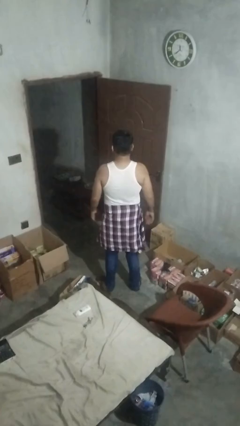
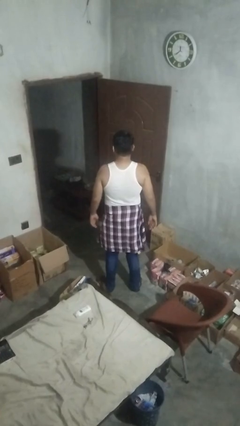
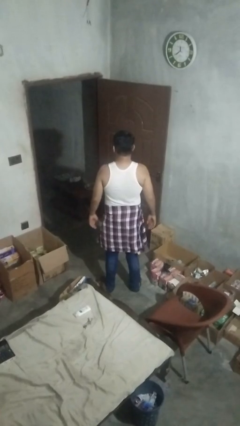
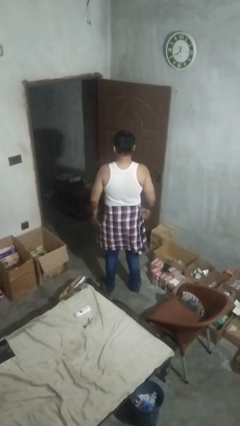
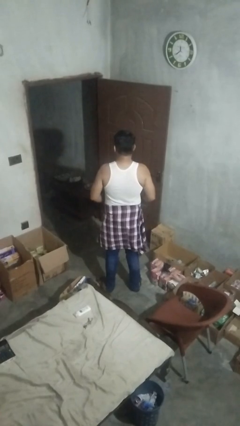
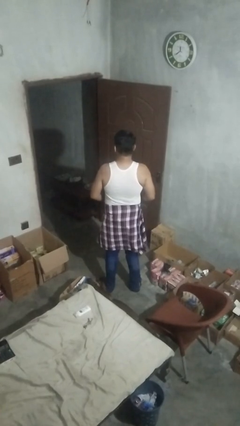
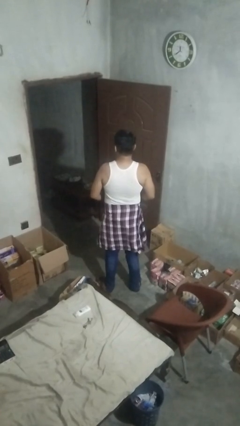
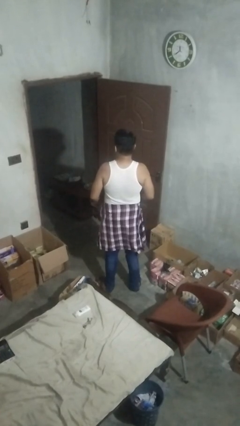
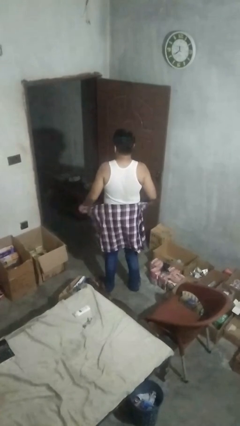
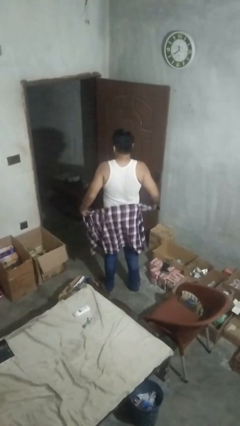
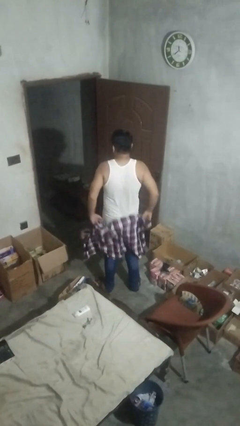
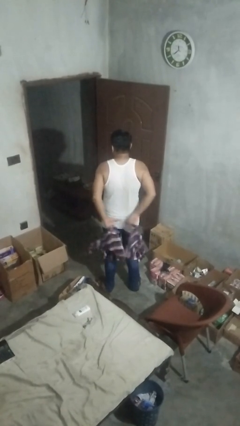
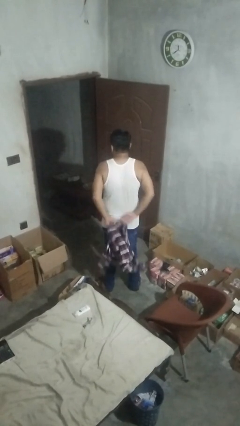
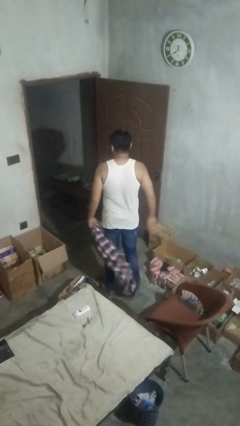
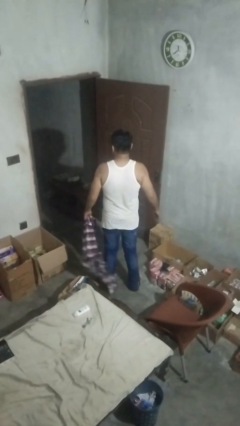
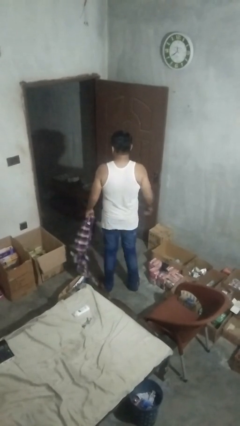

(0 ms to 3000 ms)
person unties jacket around waist

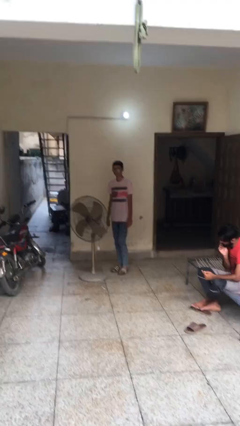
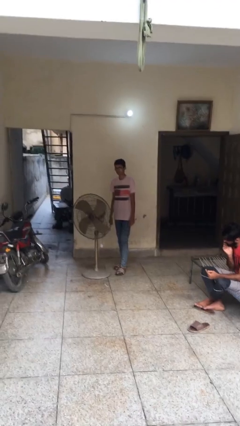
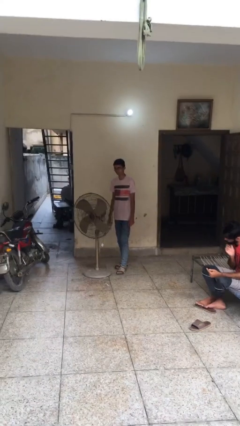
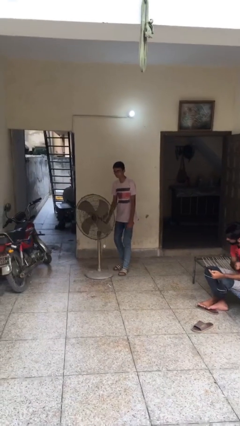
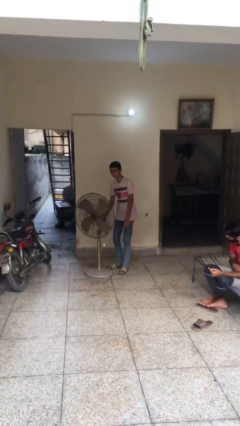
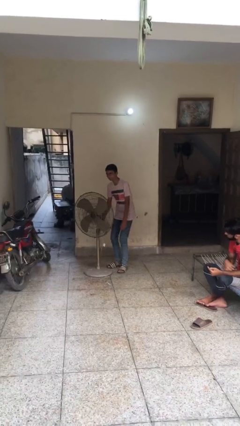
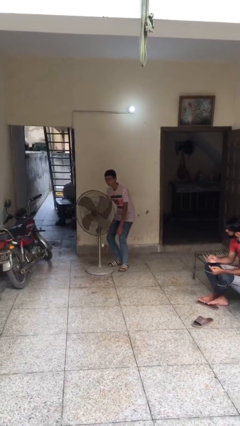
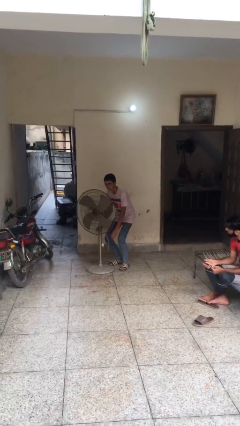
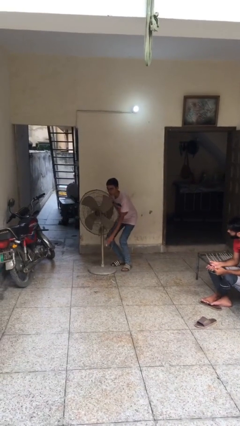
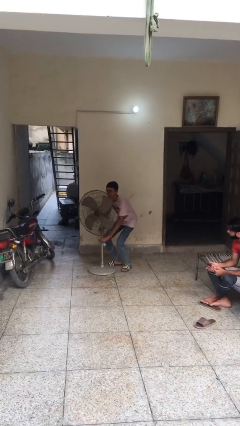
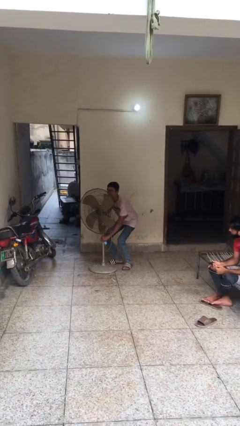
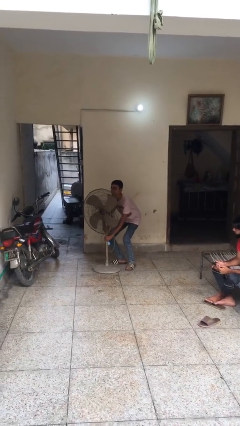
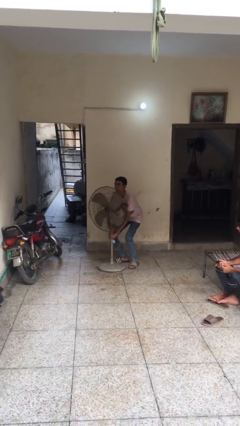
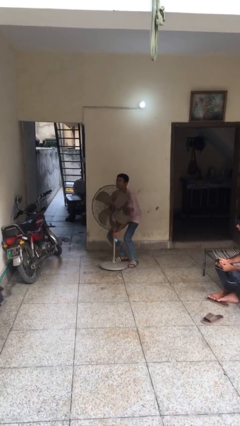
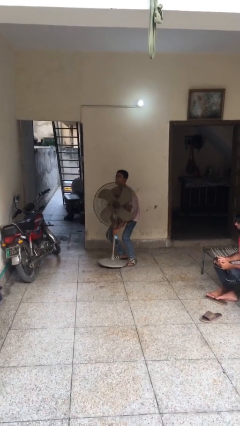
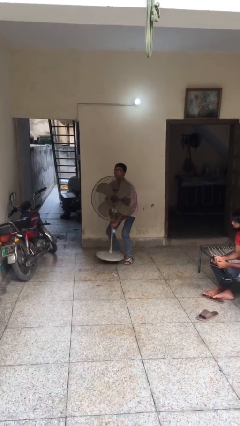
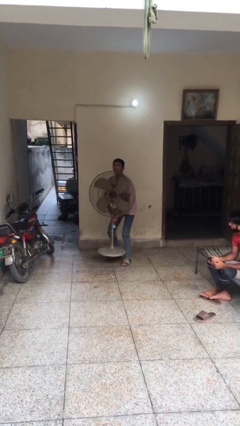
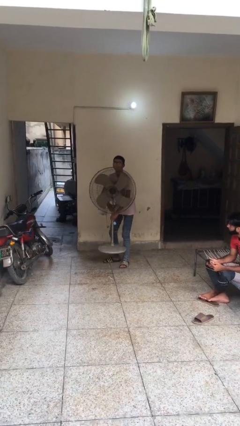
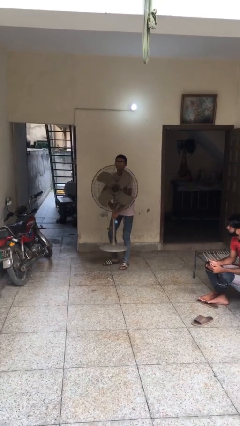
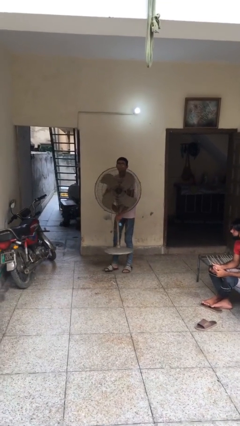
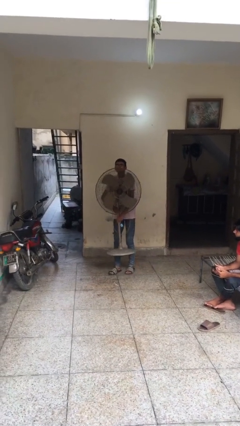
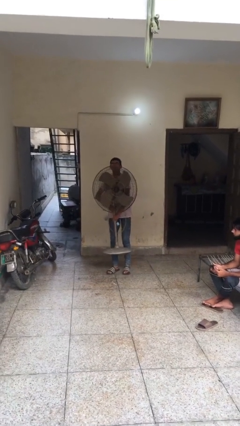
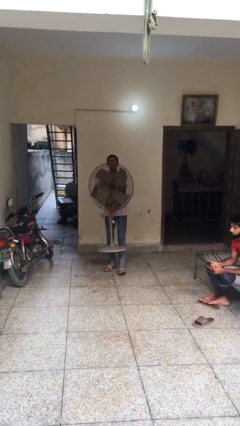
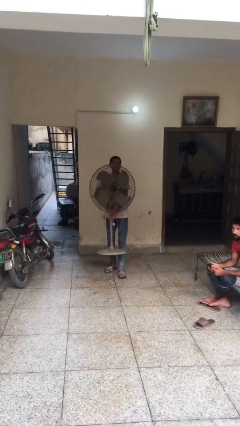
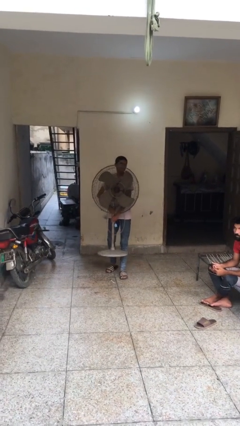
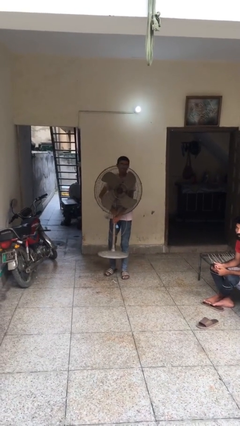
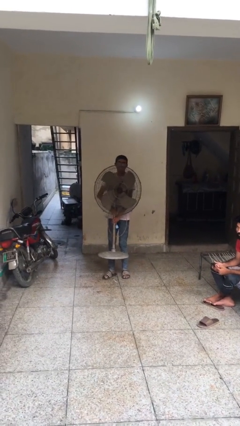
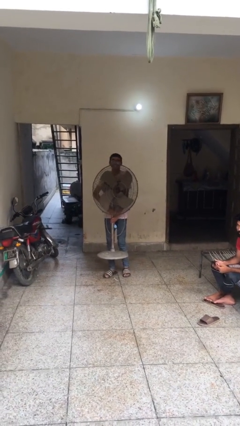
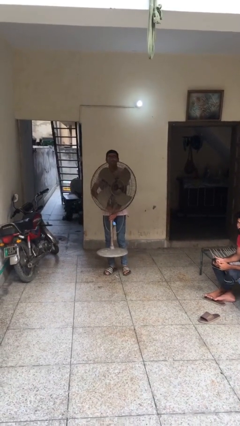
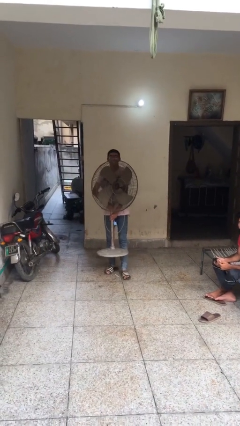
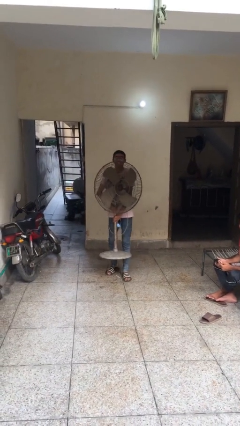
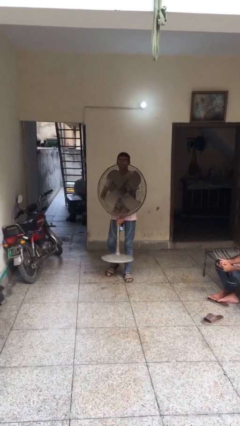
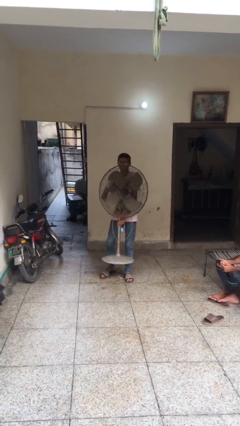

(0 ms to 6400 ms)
person carries heavy object

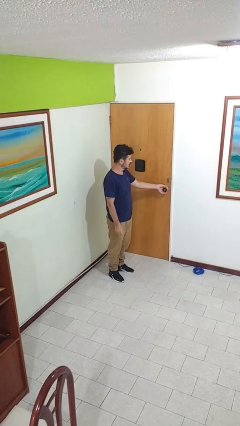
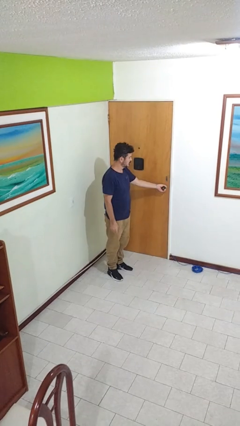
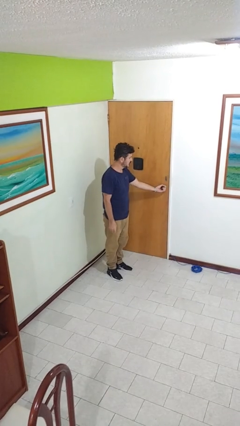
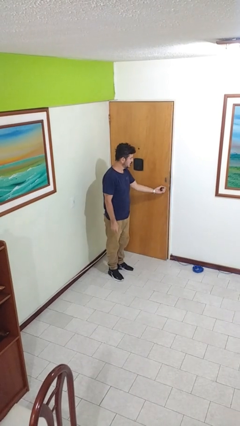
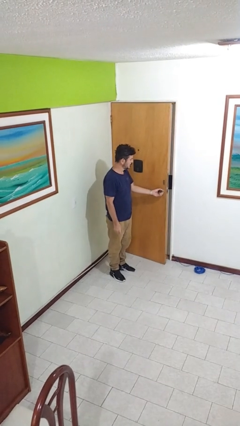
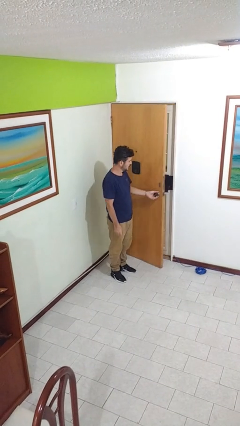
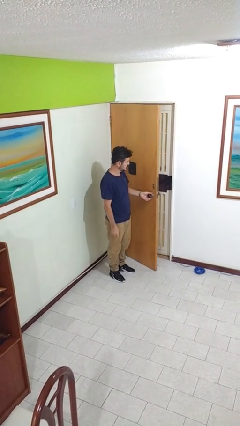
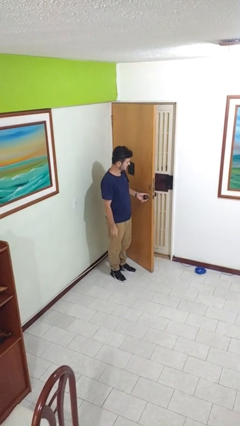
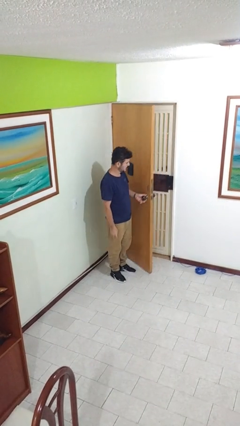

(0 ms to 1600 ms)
person opens facility door

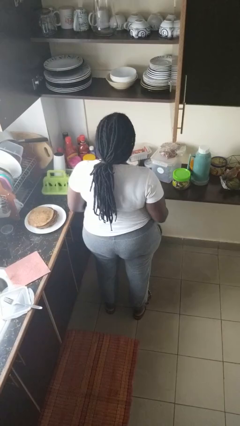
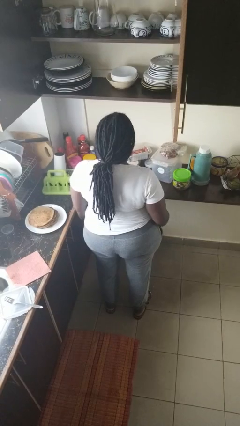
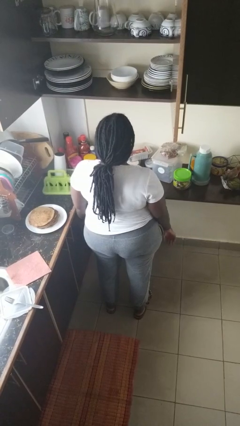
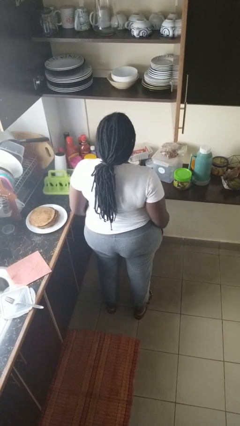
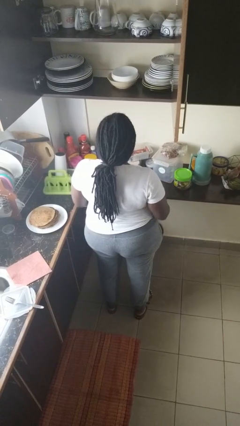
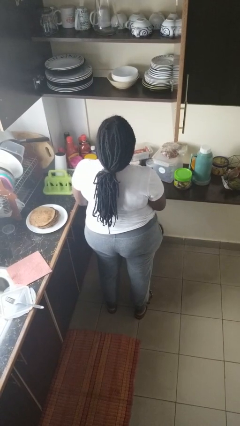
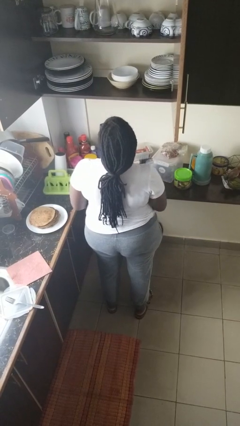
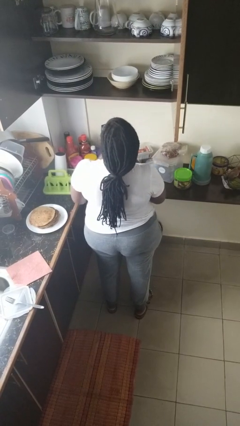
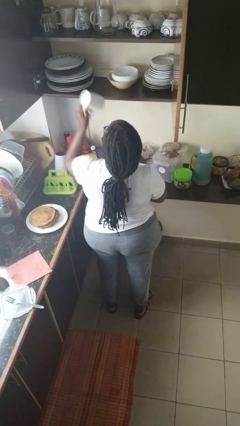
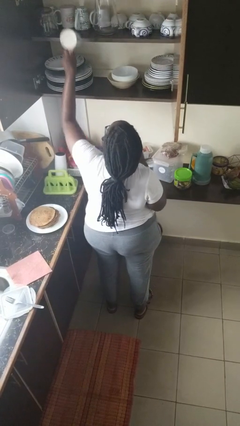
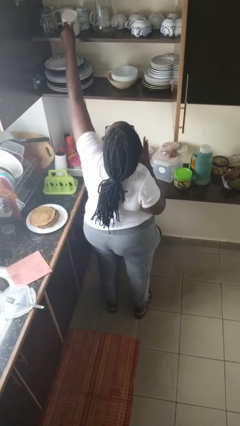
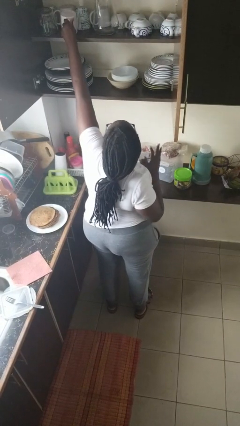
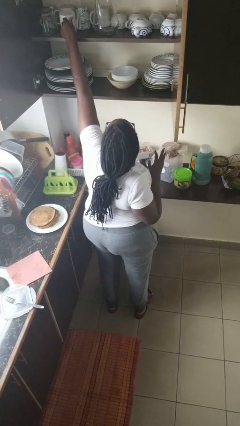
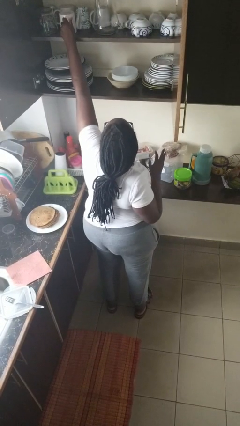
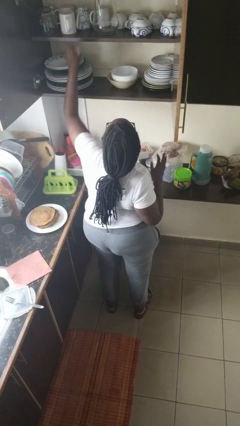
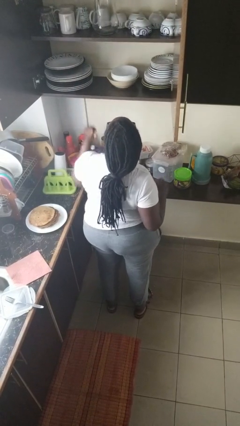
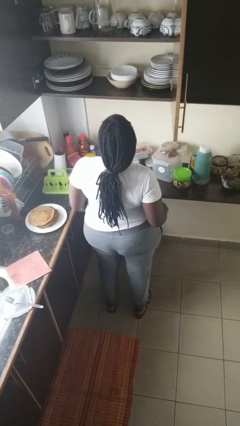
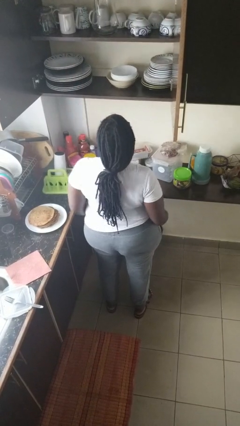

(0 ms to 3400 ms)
person puts object in cabinet

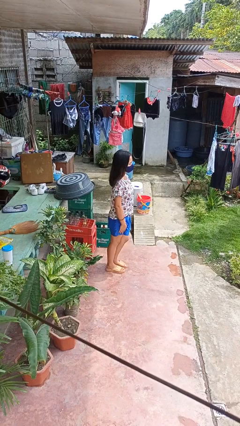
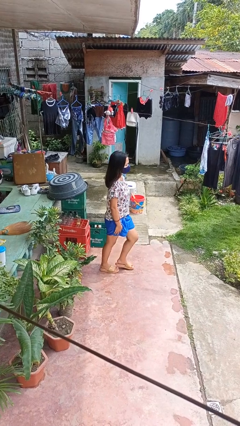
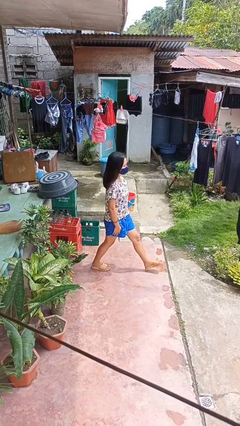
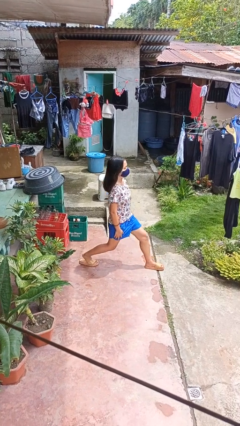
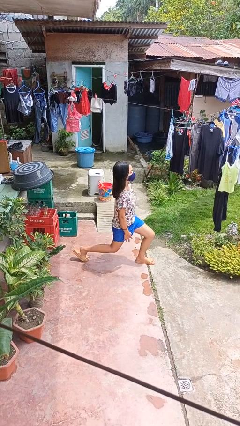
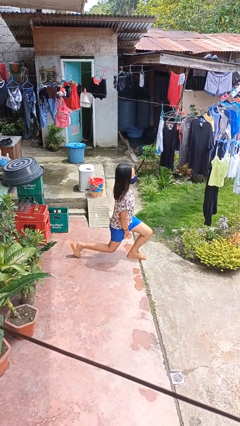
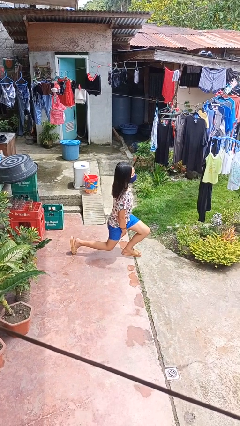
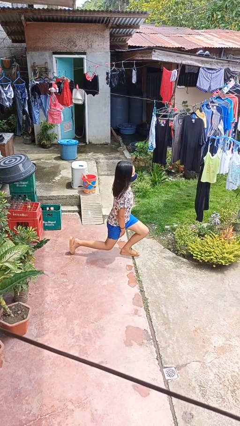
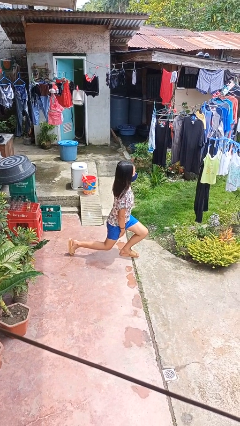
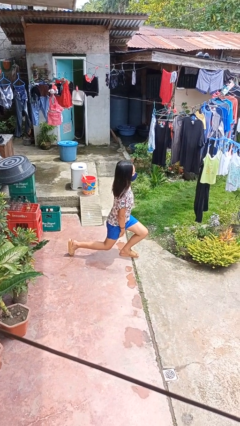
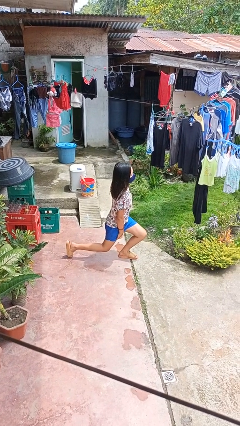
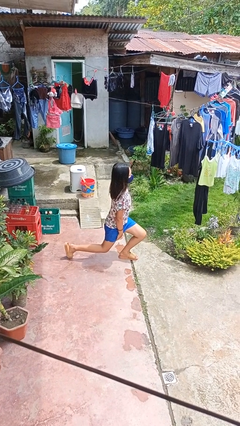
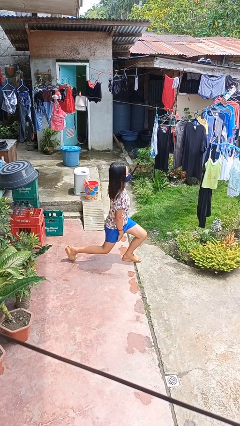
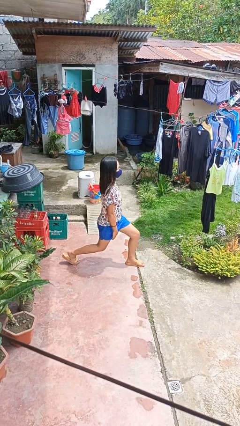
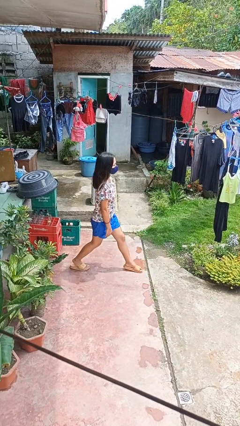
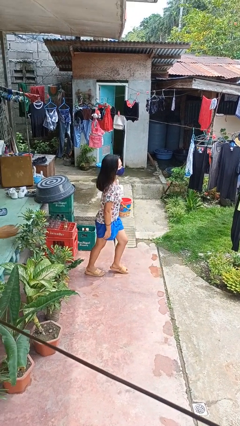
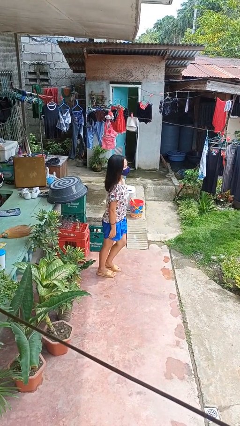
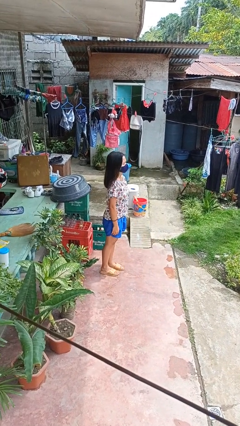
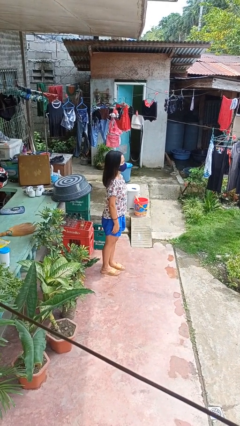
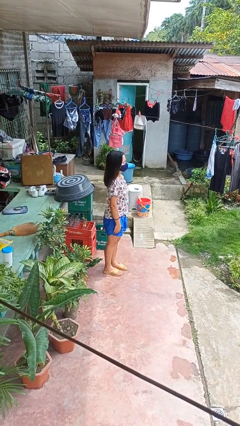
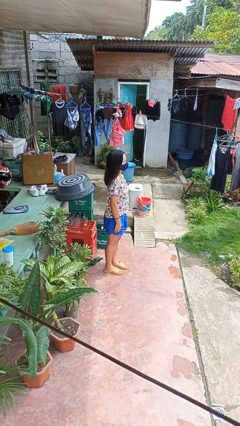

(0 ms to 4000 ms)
person exercises with lunges
